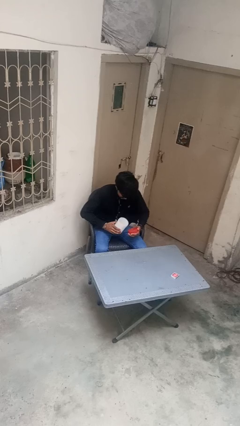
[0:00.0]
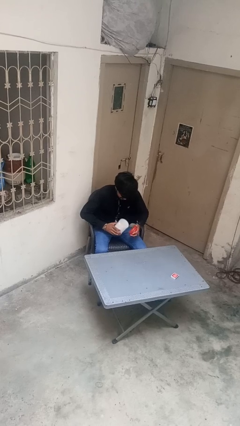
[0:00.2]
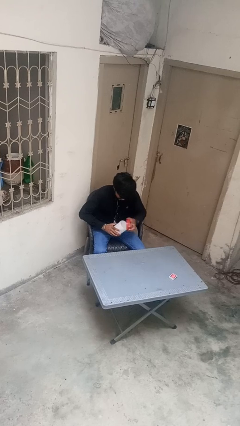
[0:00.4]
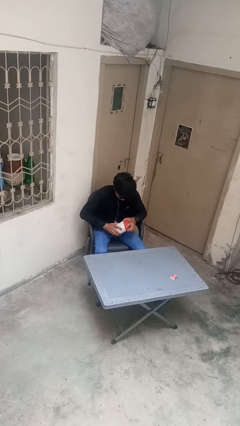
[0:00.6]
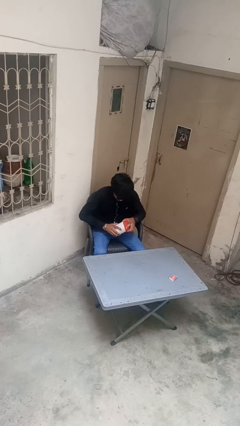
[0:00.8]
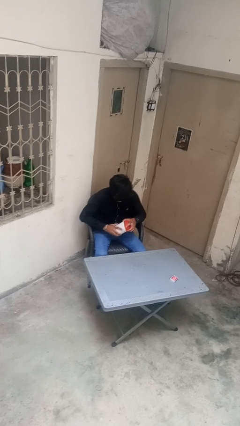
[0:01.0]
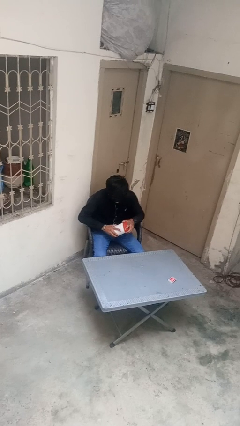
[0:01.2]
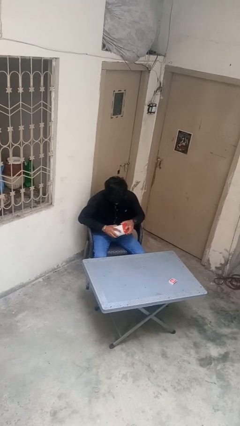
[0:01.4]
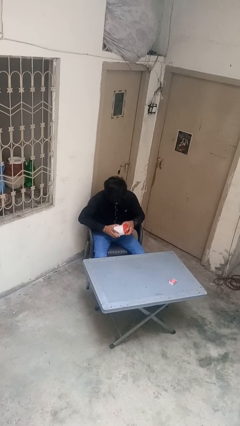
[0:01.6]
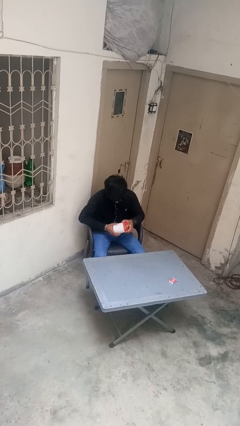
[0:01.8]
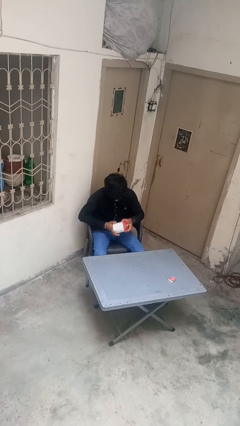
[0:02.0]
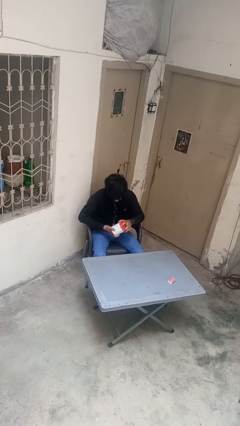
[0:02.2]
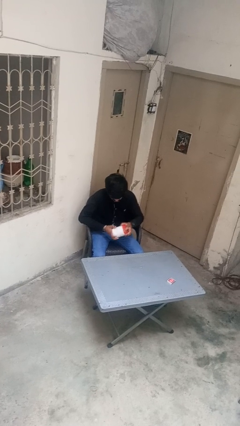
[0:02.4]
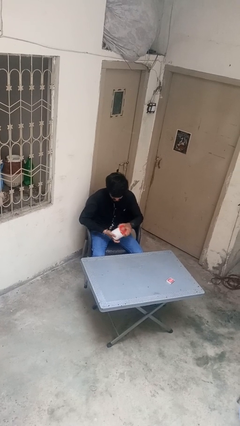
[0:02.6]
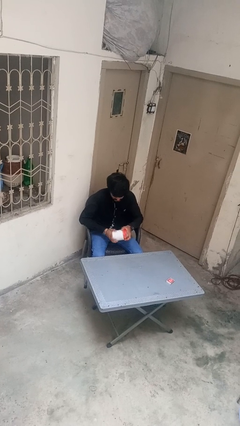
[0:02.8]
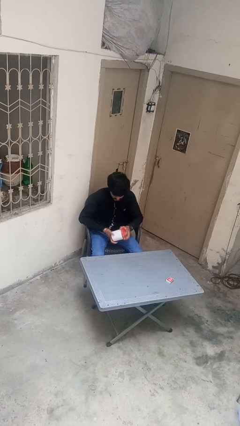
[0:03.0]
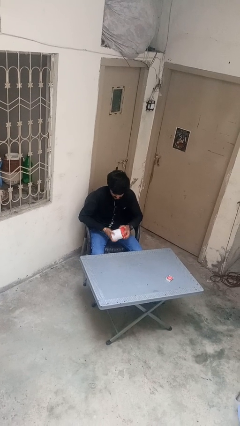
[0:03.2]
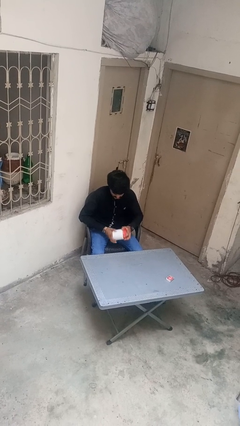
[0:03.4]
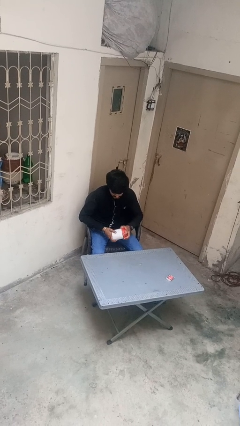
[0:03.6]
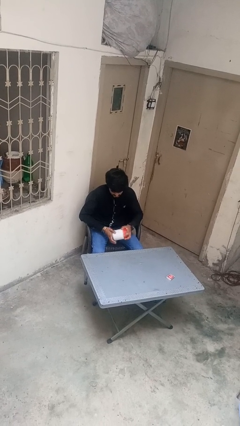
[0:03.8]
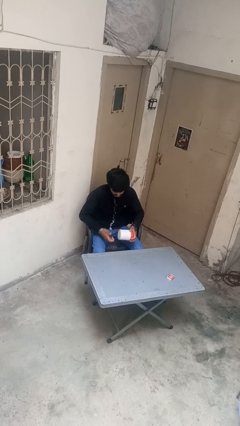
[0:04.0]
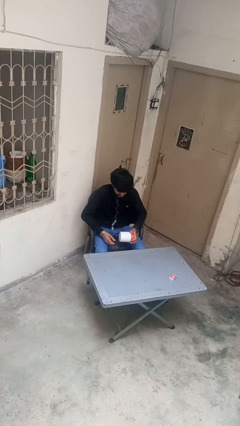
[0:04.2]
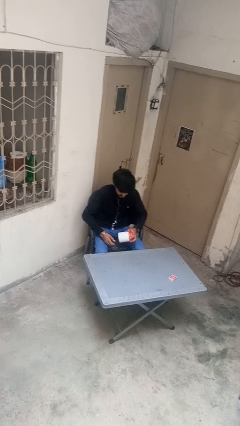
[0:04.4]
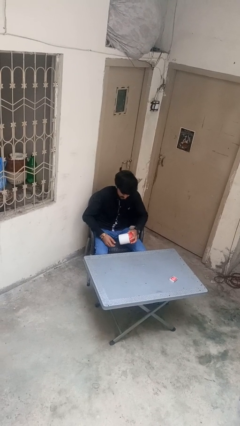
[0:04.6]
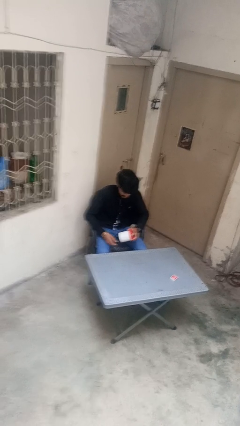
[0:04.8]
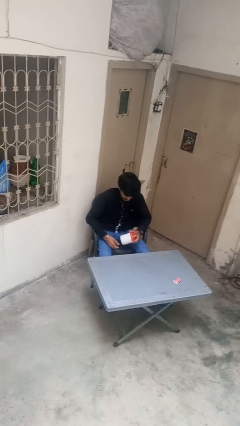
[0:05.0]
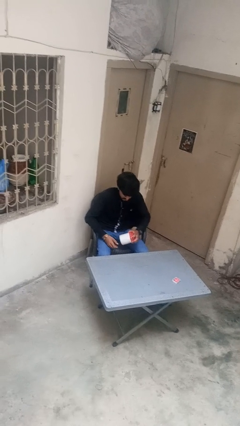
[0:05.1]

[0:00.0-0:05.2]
person closes jar

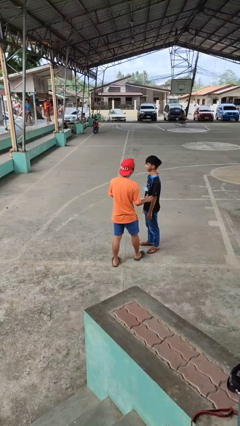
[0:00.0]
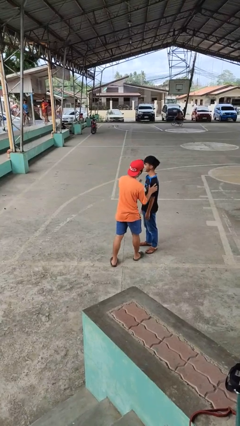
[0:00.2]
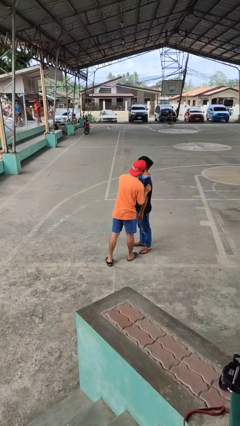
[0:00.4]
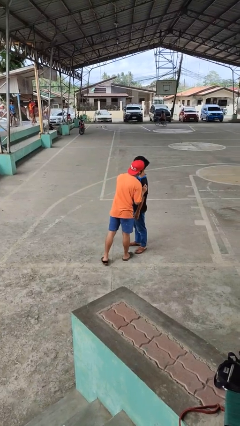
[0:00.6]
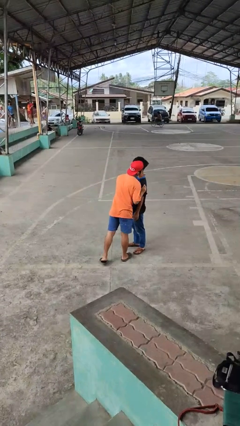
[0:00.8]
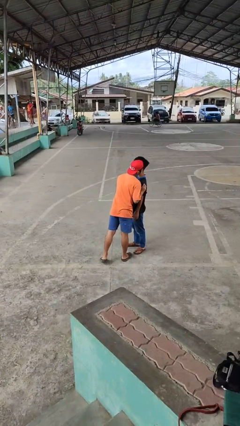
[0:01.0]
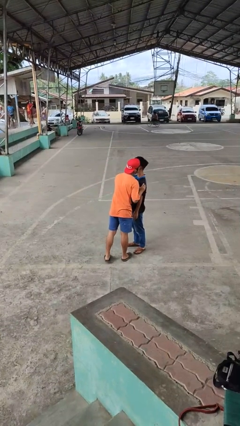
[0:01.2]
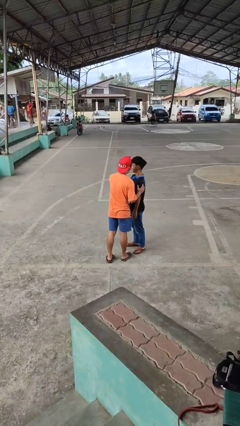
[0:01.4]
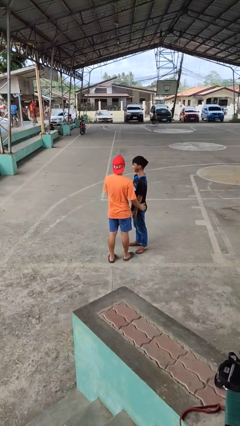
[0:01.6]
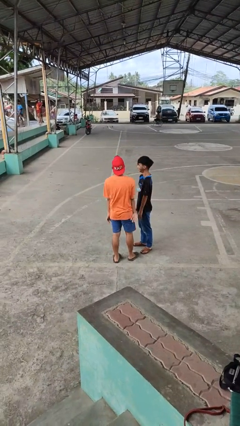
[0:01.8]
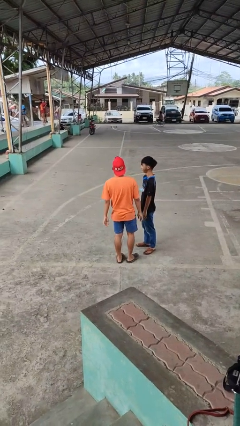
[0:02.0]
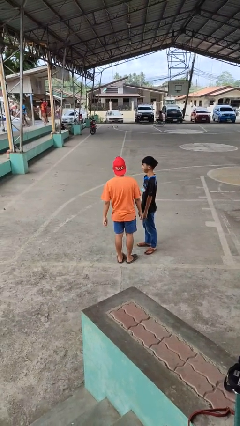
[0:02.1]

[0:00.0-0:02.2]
person kisses cheek of person

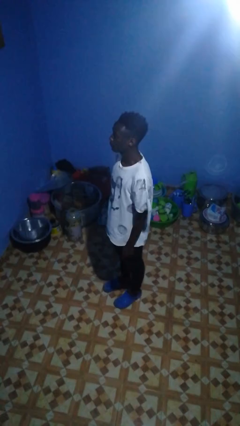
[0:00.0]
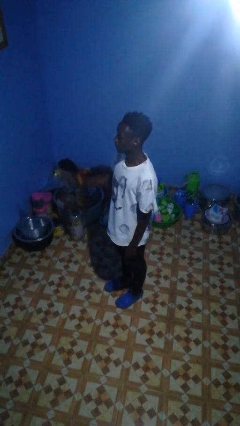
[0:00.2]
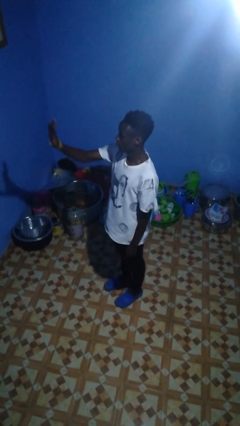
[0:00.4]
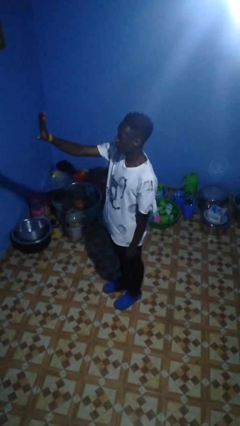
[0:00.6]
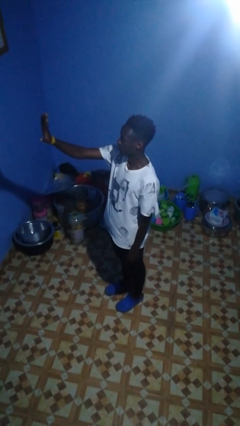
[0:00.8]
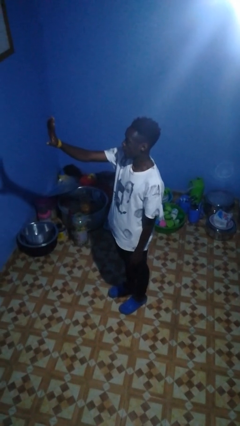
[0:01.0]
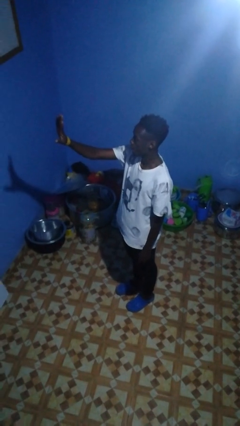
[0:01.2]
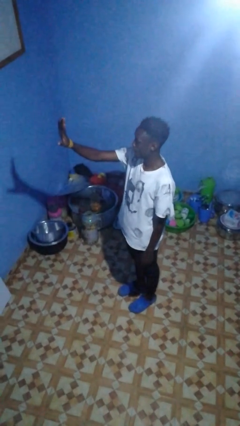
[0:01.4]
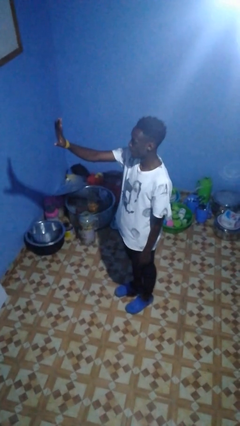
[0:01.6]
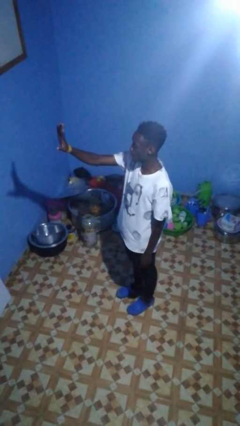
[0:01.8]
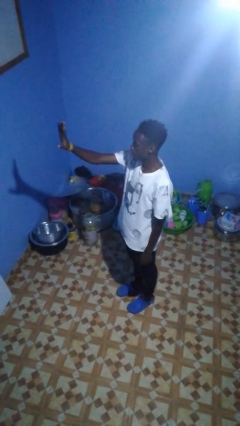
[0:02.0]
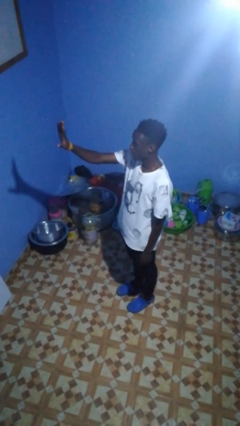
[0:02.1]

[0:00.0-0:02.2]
person gestures number five

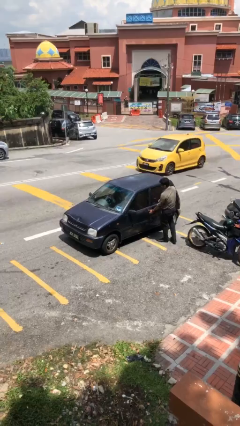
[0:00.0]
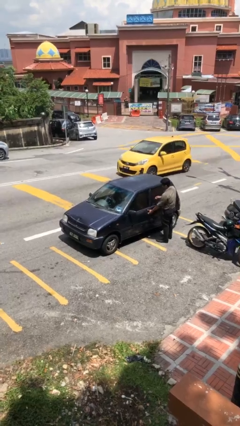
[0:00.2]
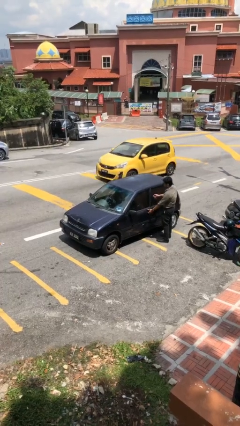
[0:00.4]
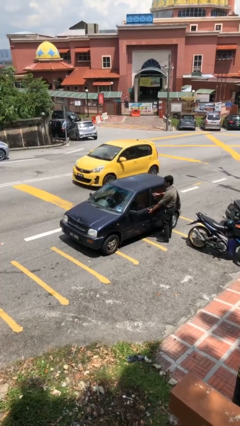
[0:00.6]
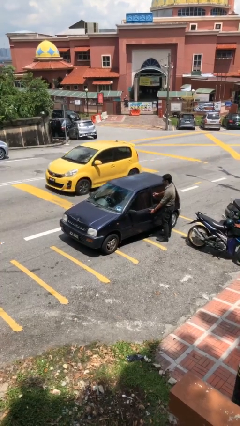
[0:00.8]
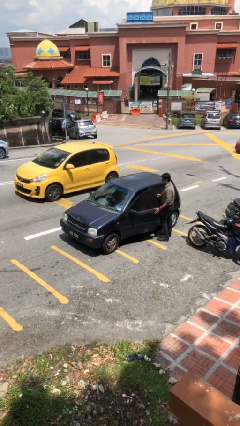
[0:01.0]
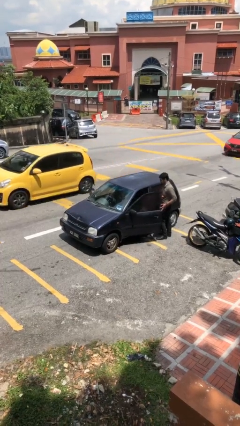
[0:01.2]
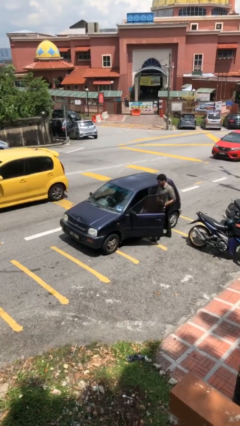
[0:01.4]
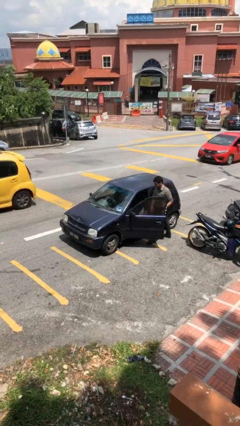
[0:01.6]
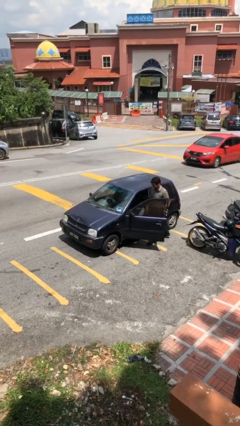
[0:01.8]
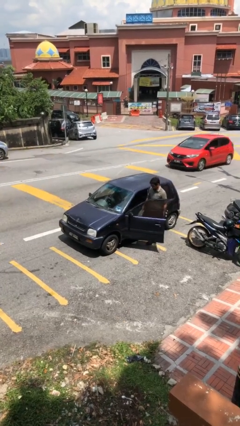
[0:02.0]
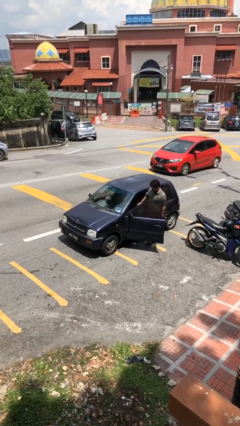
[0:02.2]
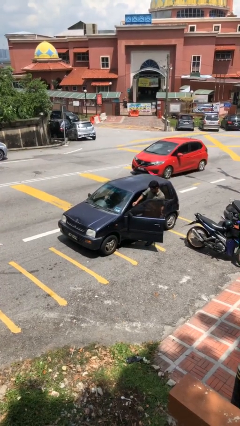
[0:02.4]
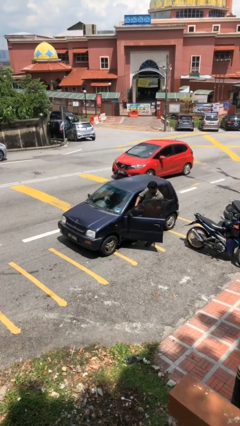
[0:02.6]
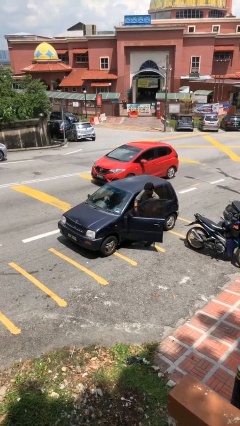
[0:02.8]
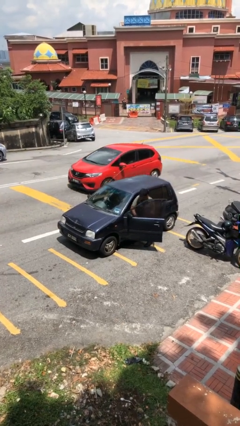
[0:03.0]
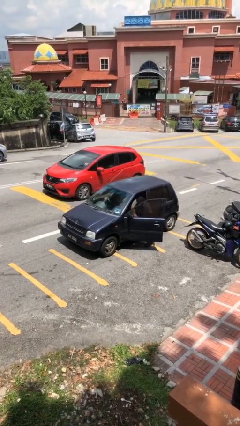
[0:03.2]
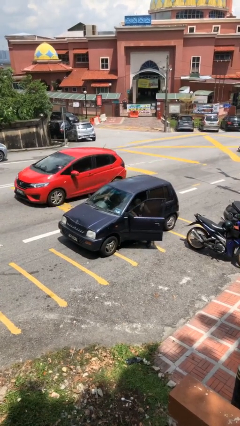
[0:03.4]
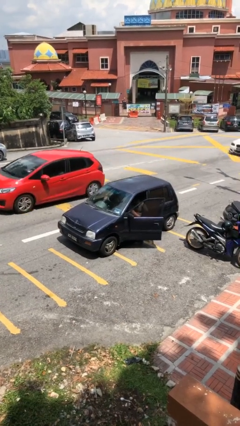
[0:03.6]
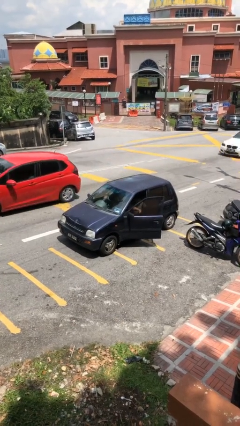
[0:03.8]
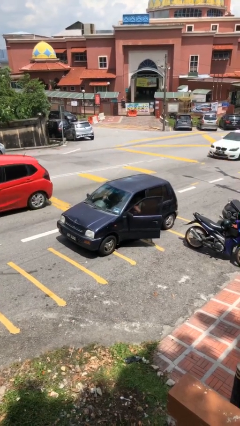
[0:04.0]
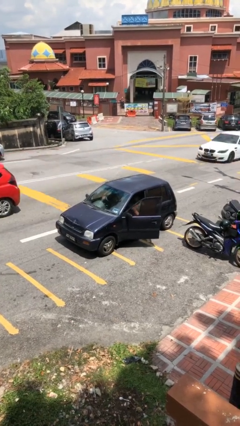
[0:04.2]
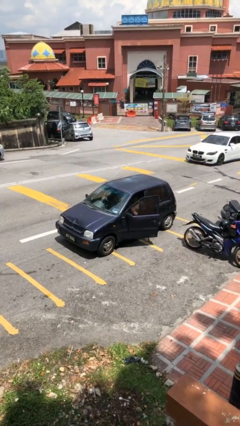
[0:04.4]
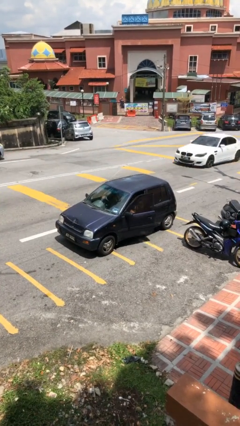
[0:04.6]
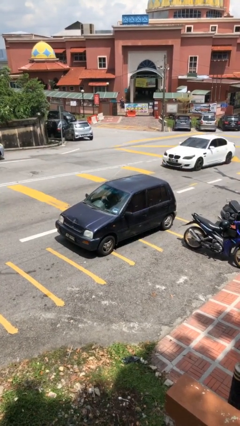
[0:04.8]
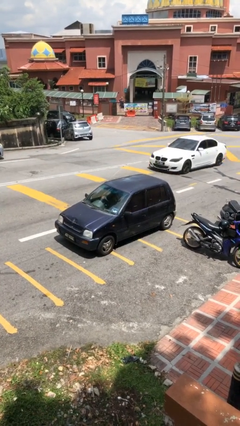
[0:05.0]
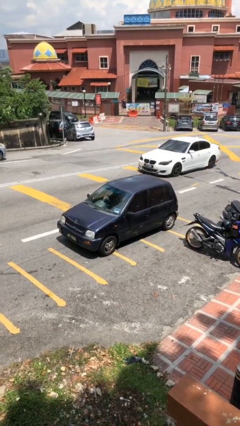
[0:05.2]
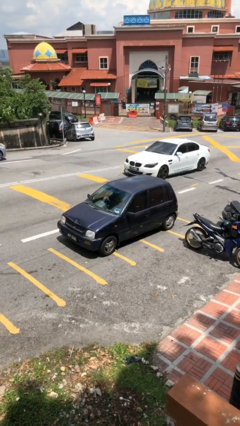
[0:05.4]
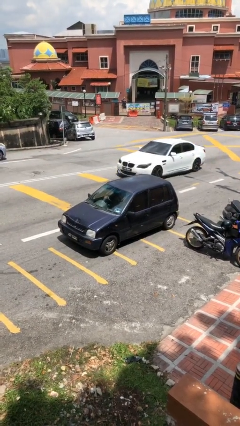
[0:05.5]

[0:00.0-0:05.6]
car picks up person

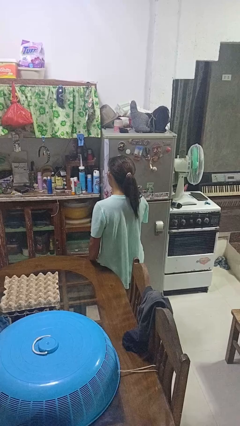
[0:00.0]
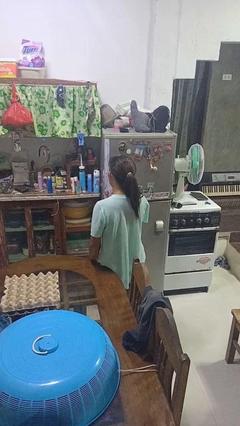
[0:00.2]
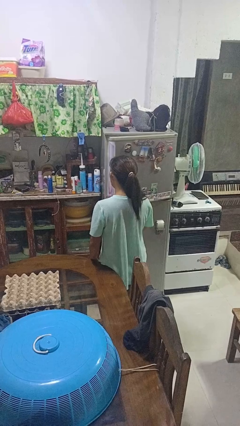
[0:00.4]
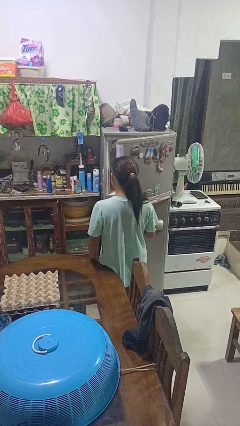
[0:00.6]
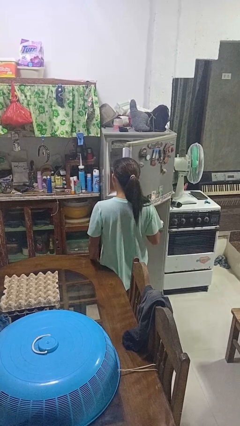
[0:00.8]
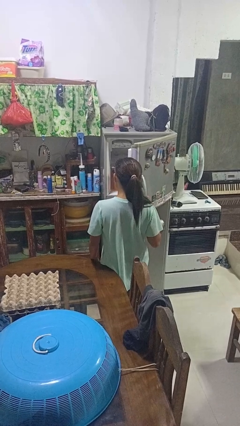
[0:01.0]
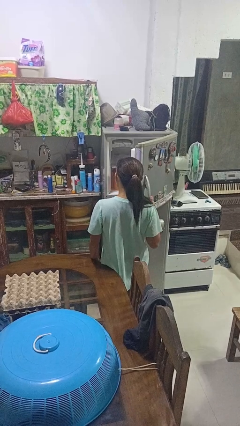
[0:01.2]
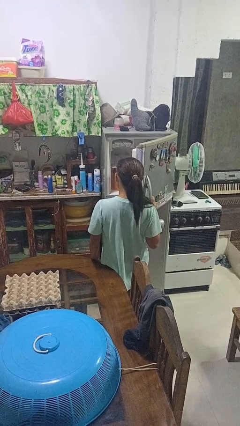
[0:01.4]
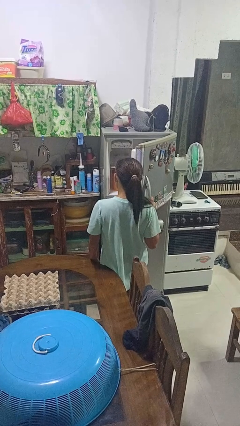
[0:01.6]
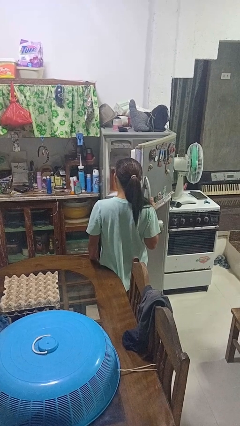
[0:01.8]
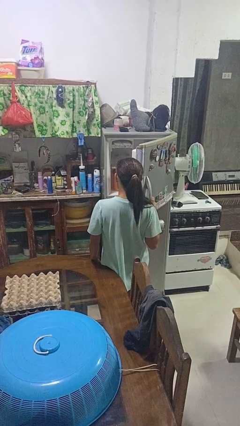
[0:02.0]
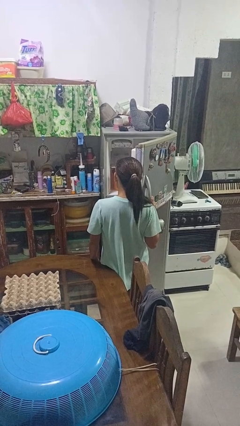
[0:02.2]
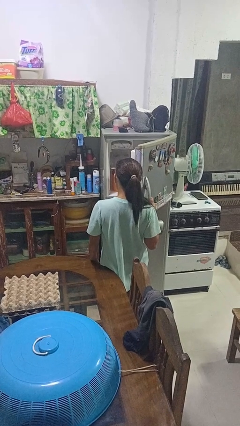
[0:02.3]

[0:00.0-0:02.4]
person opens refrigerator
